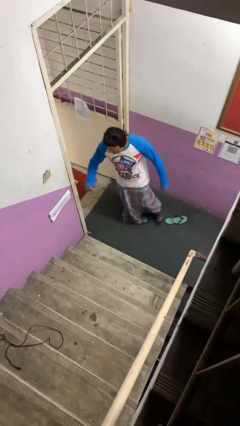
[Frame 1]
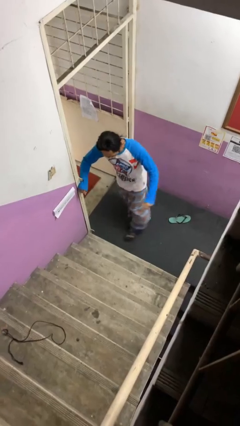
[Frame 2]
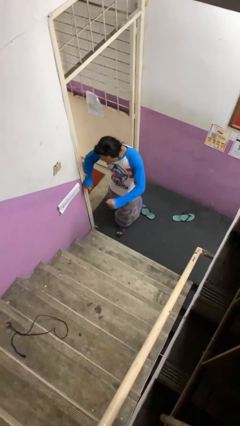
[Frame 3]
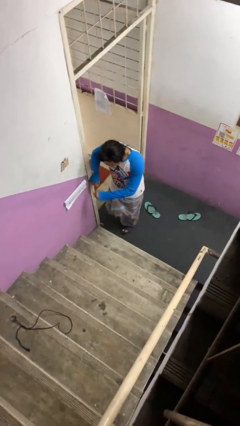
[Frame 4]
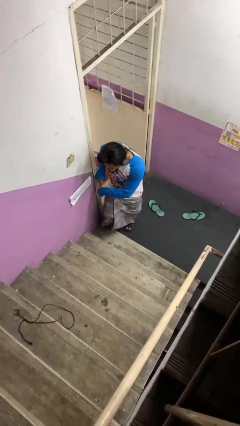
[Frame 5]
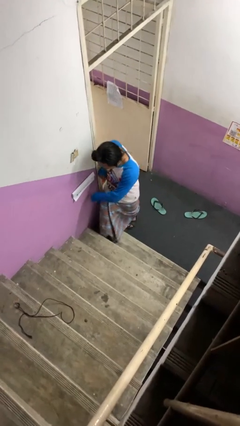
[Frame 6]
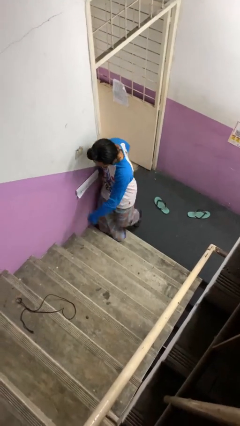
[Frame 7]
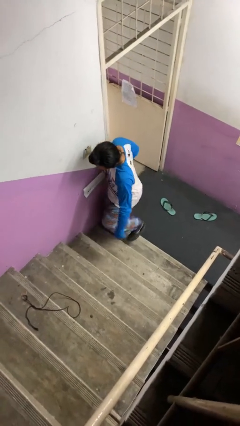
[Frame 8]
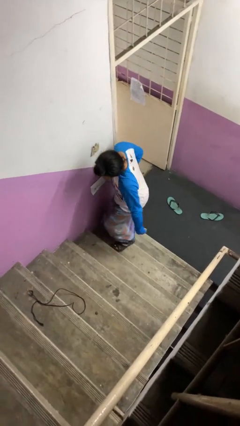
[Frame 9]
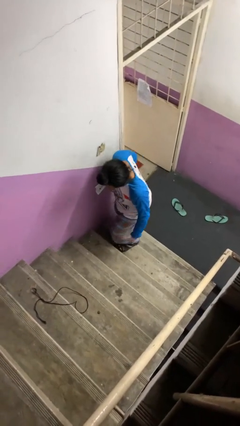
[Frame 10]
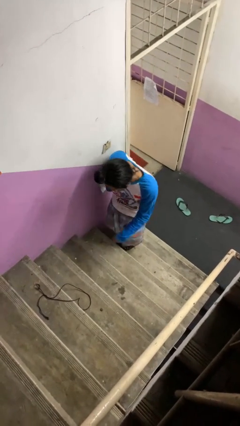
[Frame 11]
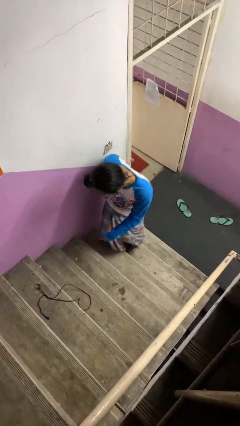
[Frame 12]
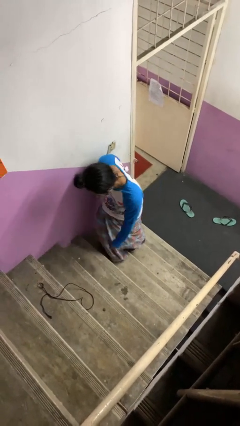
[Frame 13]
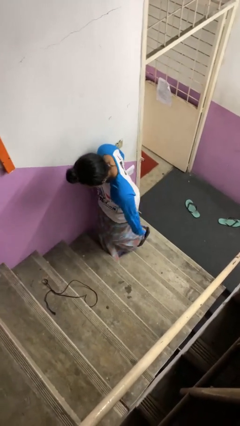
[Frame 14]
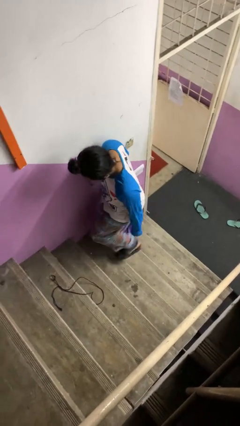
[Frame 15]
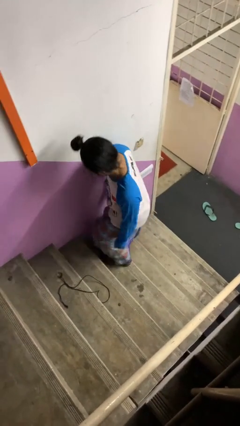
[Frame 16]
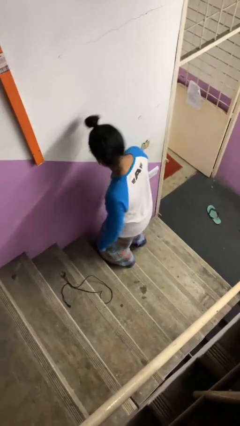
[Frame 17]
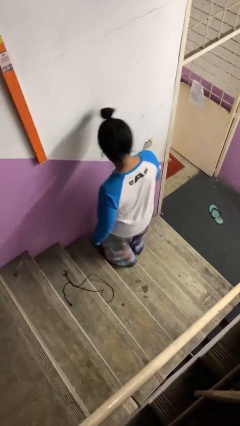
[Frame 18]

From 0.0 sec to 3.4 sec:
person climbs up stairs

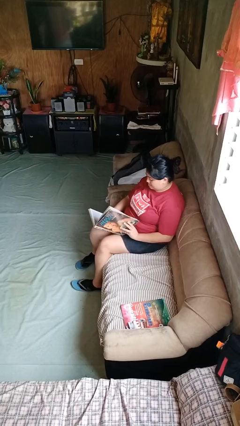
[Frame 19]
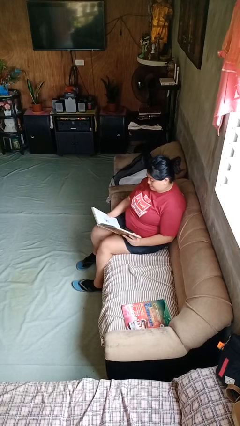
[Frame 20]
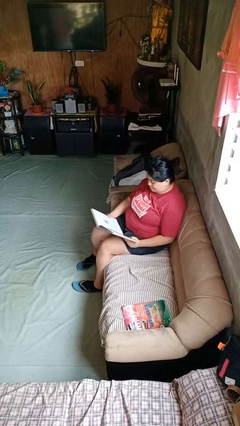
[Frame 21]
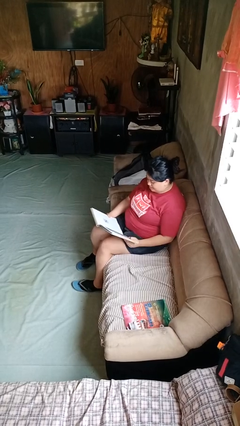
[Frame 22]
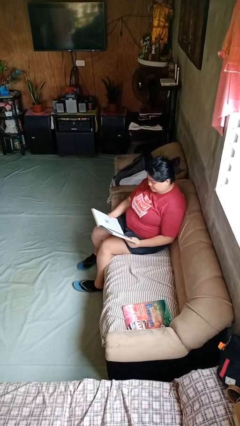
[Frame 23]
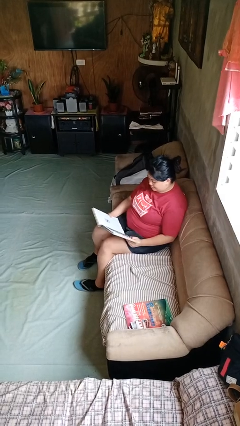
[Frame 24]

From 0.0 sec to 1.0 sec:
person reads book

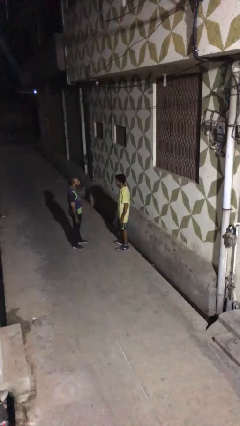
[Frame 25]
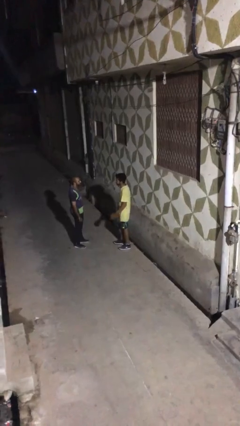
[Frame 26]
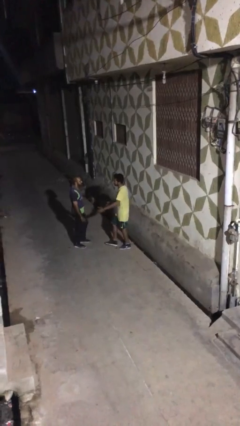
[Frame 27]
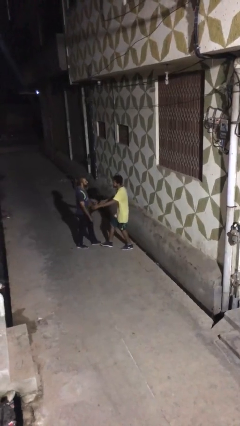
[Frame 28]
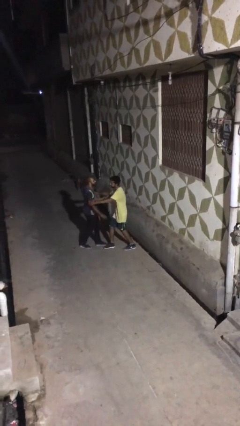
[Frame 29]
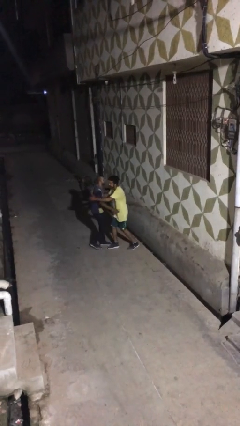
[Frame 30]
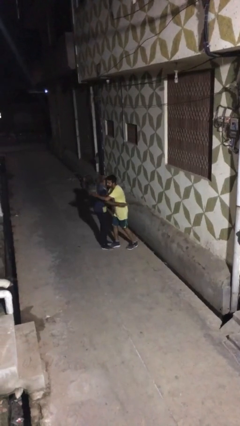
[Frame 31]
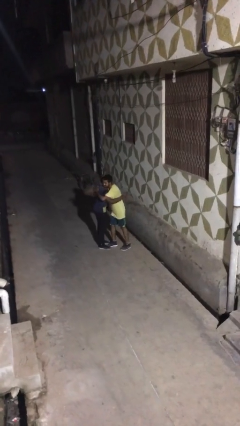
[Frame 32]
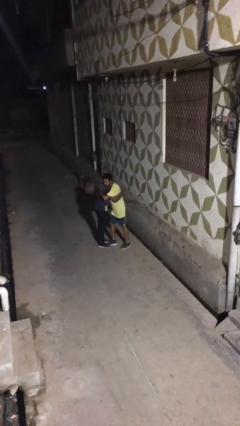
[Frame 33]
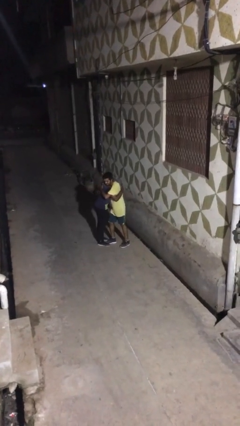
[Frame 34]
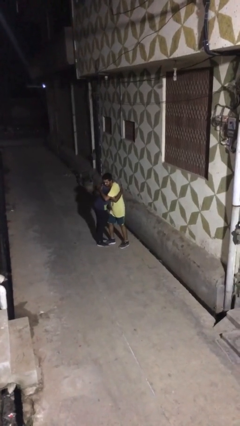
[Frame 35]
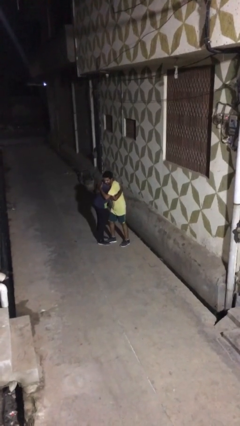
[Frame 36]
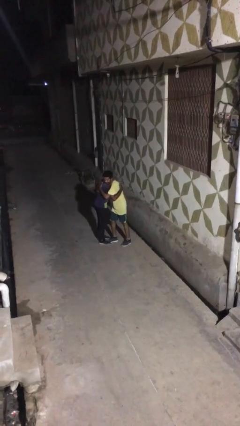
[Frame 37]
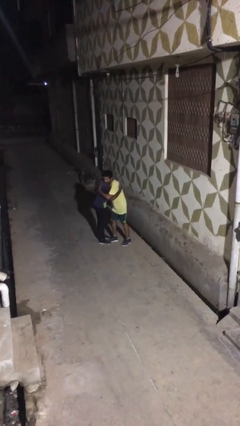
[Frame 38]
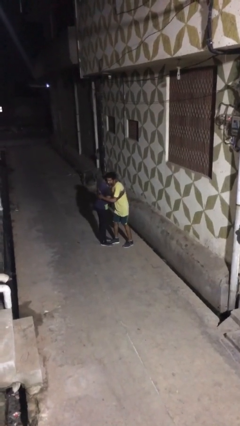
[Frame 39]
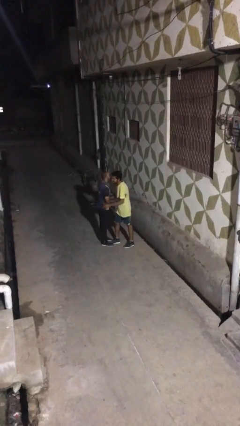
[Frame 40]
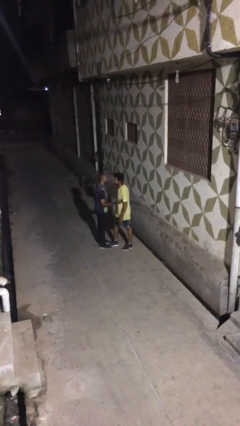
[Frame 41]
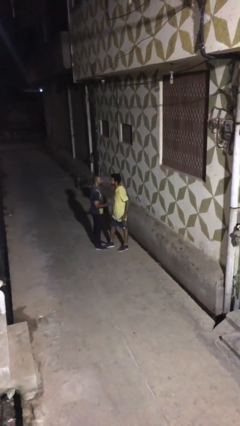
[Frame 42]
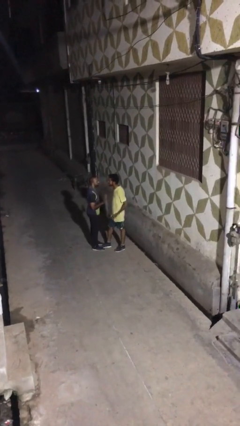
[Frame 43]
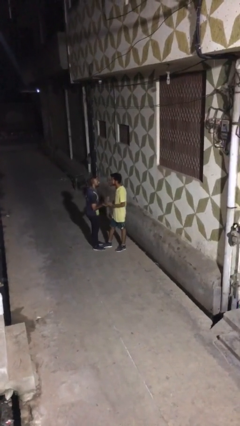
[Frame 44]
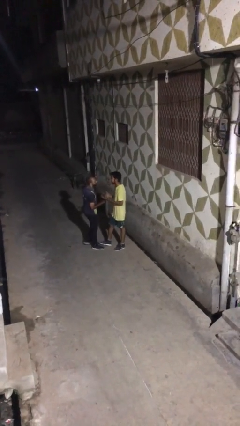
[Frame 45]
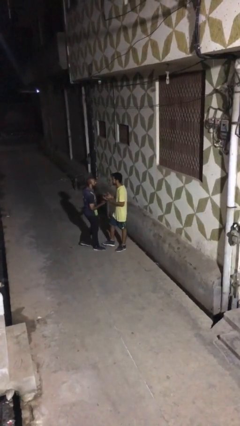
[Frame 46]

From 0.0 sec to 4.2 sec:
person embraces person

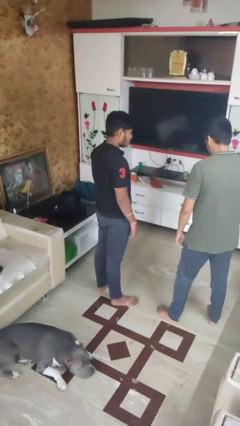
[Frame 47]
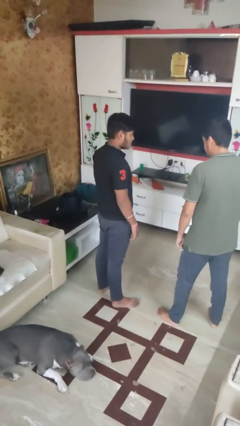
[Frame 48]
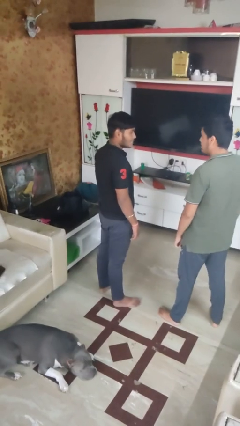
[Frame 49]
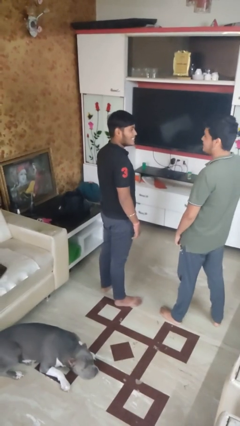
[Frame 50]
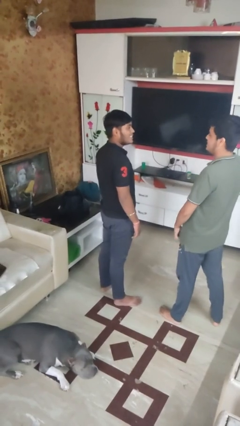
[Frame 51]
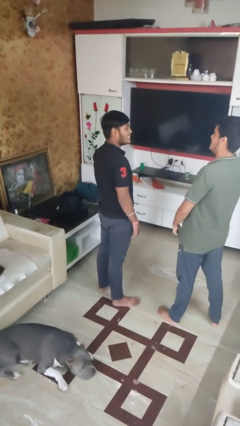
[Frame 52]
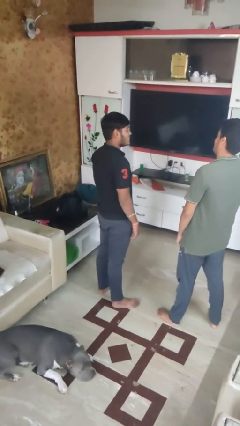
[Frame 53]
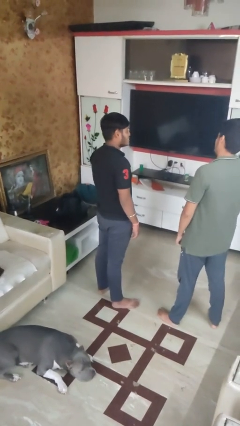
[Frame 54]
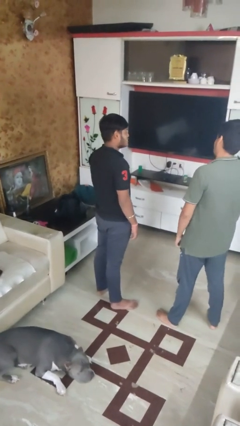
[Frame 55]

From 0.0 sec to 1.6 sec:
person laughs with person

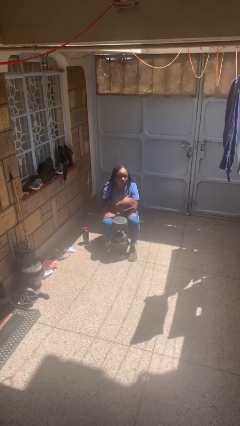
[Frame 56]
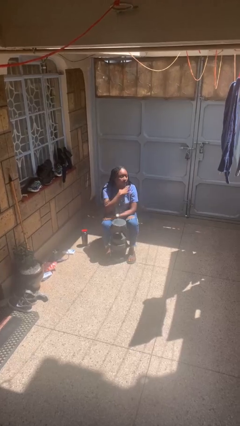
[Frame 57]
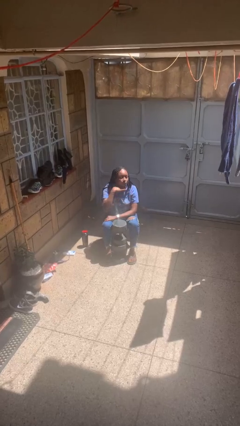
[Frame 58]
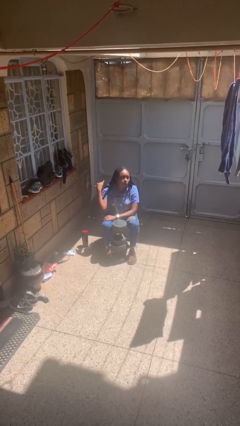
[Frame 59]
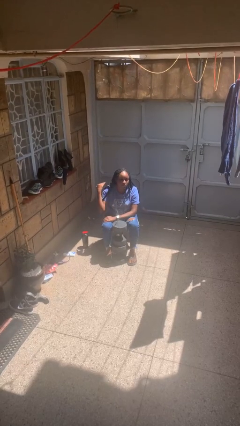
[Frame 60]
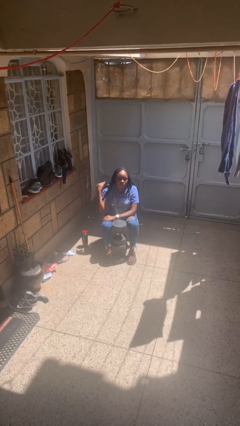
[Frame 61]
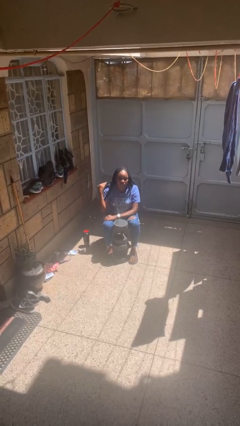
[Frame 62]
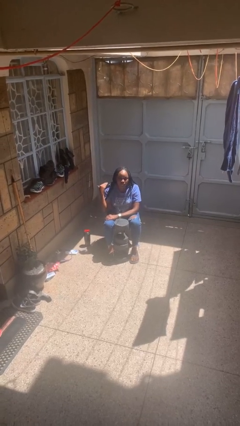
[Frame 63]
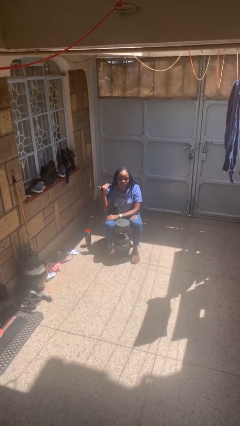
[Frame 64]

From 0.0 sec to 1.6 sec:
person gestures cut

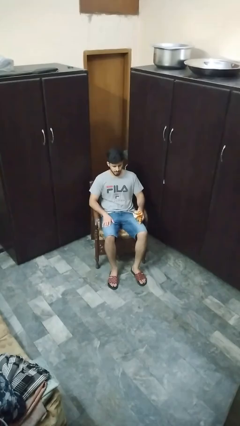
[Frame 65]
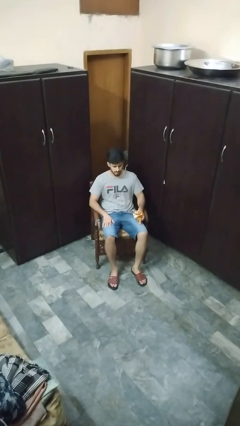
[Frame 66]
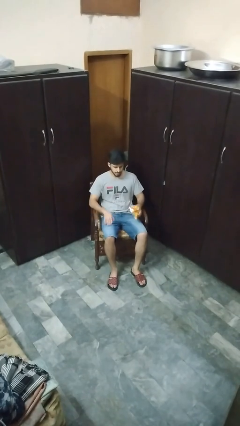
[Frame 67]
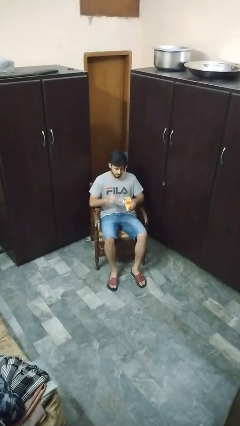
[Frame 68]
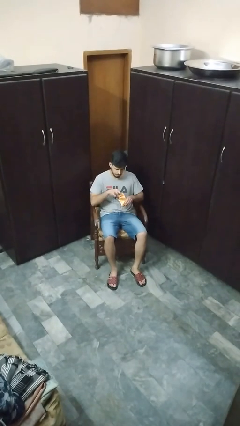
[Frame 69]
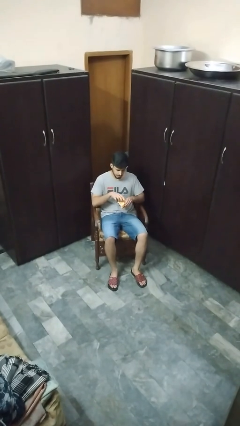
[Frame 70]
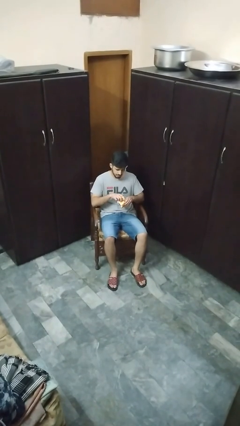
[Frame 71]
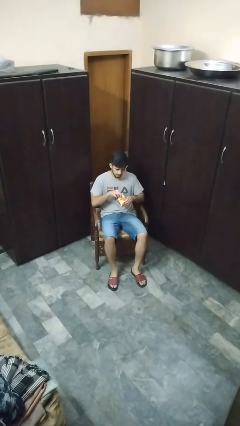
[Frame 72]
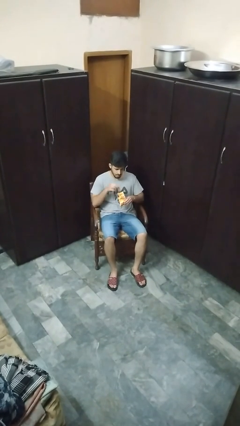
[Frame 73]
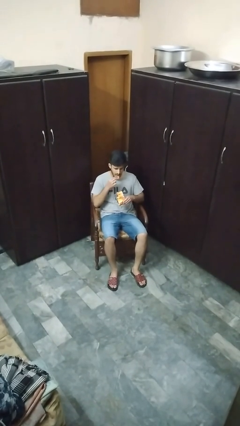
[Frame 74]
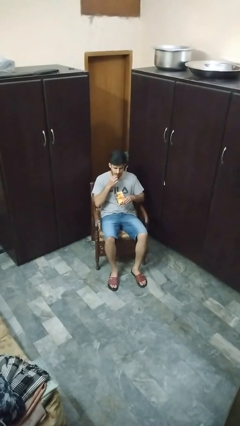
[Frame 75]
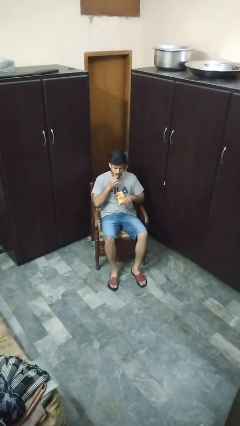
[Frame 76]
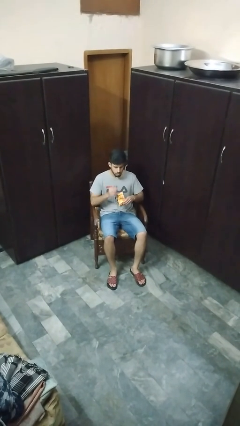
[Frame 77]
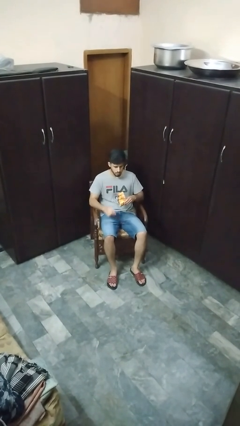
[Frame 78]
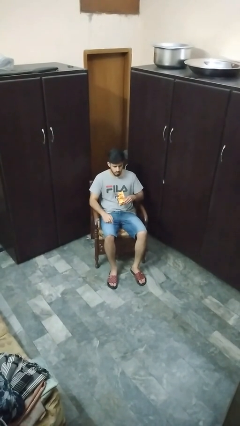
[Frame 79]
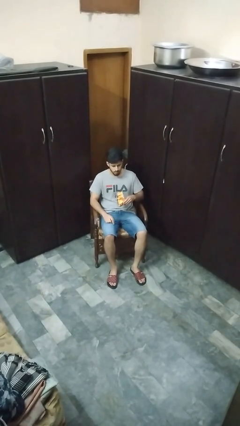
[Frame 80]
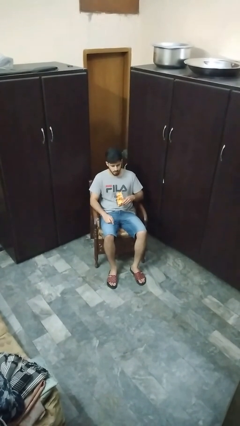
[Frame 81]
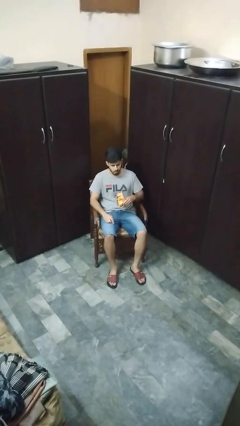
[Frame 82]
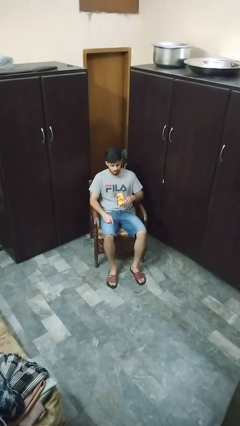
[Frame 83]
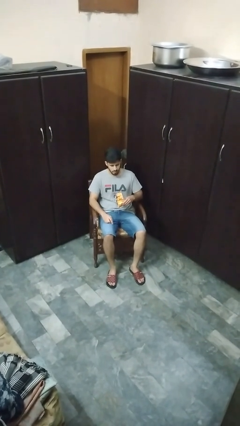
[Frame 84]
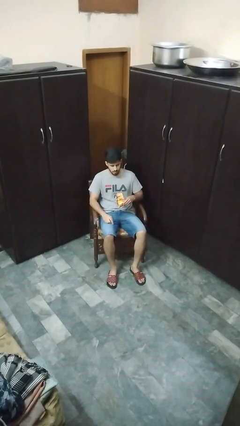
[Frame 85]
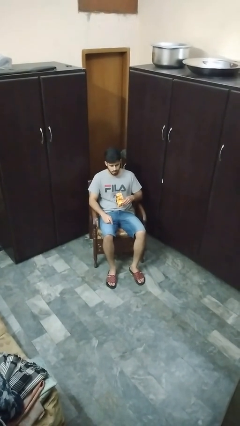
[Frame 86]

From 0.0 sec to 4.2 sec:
person eats snack from bag

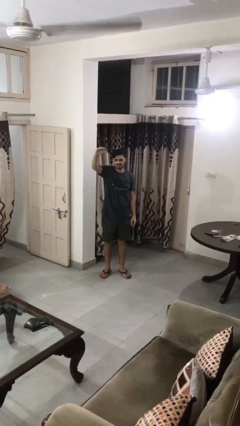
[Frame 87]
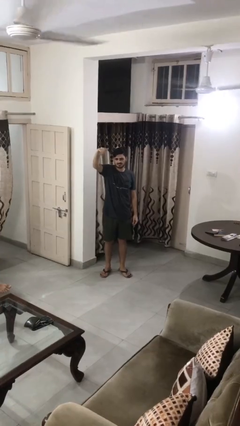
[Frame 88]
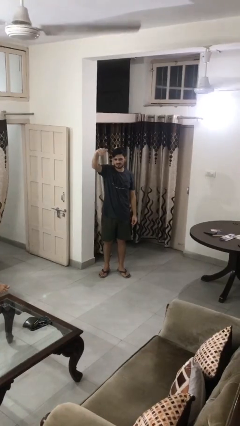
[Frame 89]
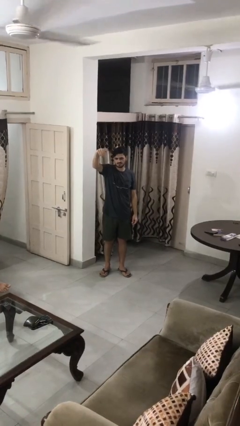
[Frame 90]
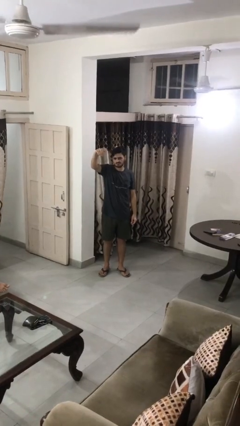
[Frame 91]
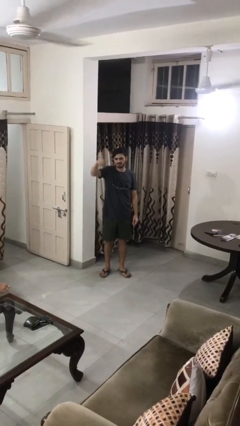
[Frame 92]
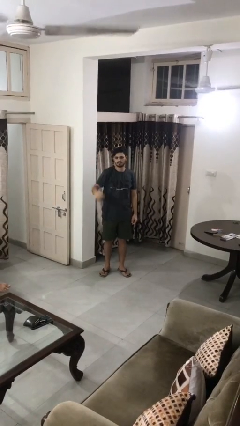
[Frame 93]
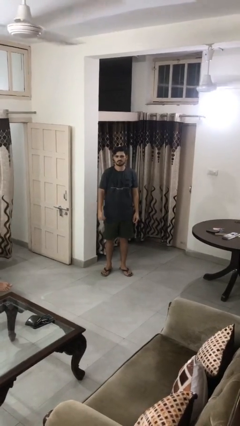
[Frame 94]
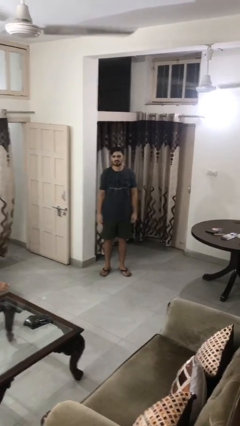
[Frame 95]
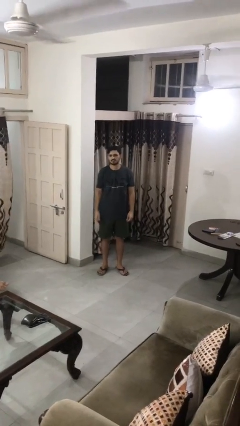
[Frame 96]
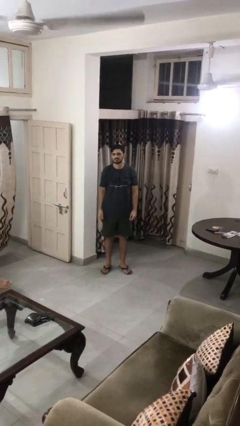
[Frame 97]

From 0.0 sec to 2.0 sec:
person gestures come here
